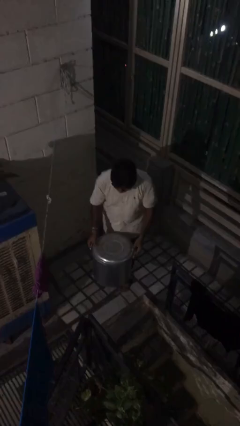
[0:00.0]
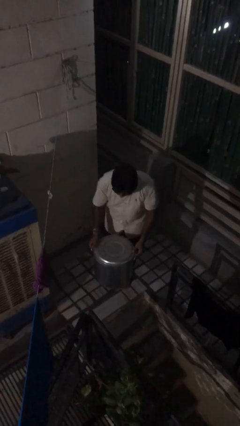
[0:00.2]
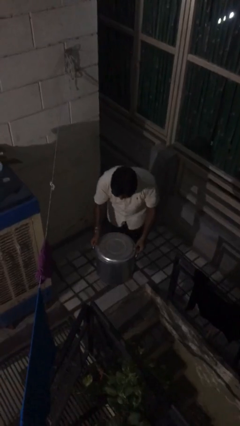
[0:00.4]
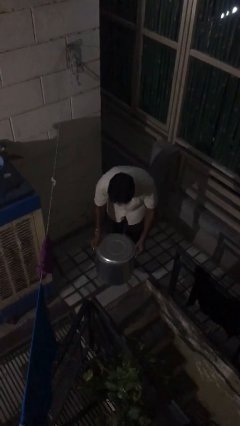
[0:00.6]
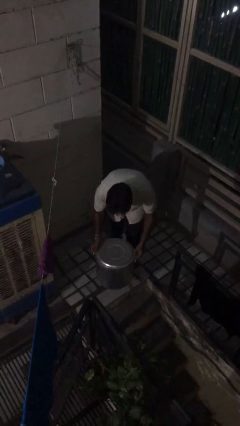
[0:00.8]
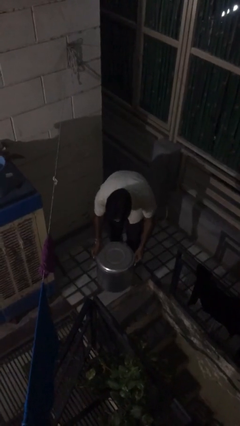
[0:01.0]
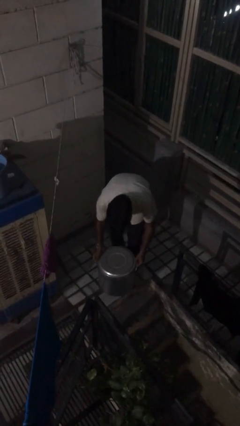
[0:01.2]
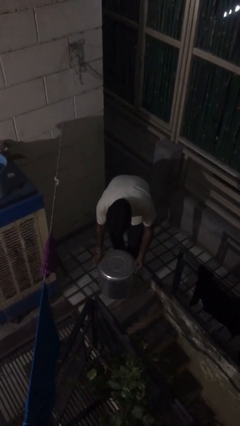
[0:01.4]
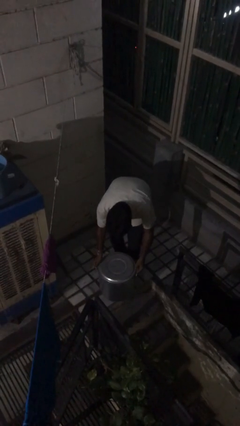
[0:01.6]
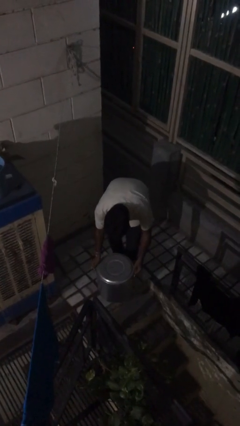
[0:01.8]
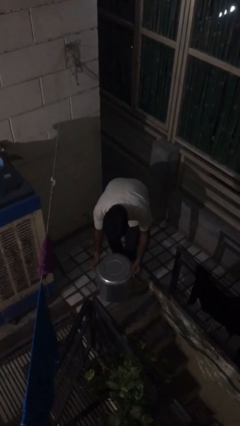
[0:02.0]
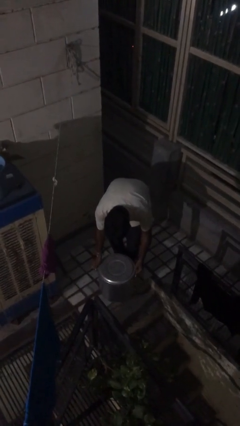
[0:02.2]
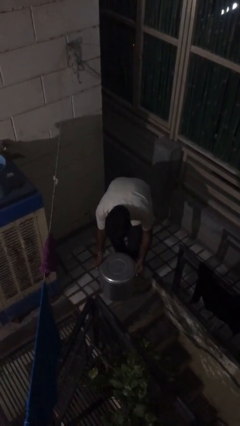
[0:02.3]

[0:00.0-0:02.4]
person puts down object on floor

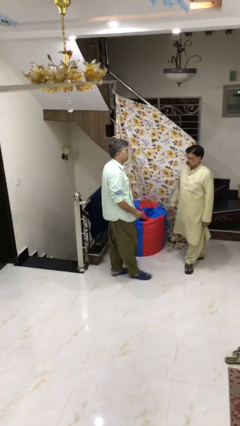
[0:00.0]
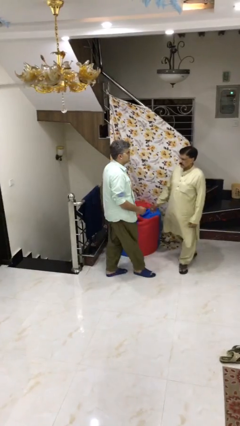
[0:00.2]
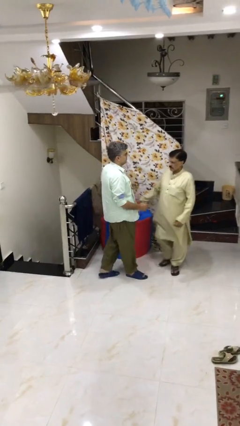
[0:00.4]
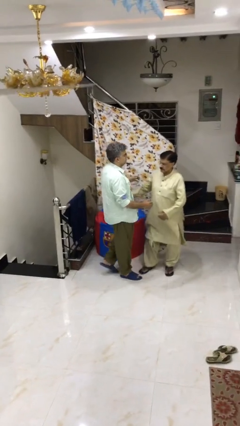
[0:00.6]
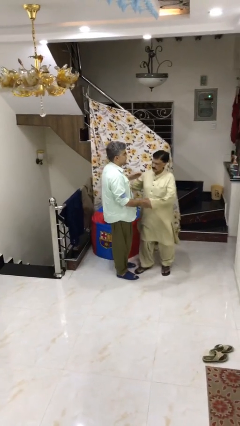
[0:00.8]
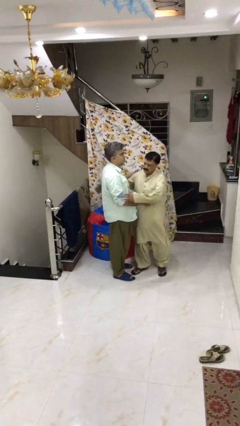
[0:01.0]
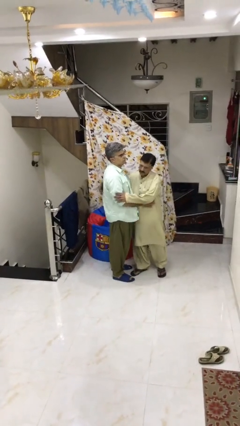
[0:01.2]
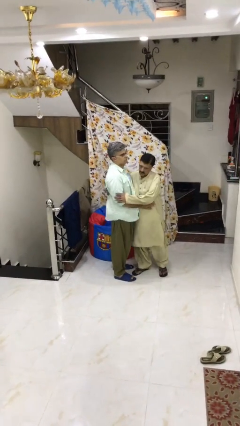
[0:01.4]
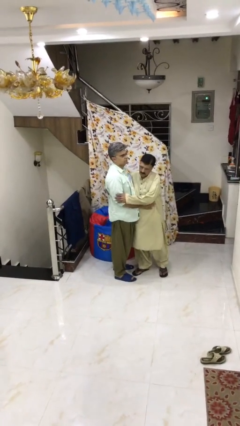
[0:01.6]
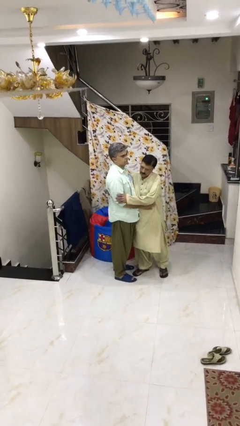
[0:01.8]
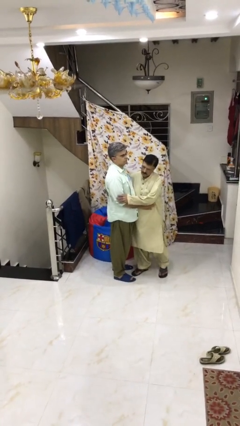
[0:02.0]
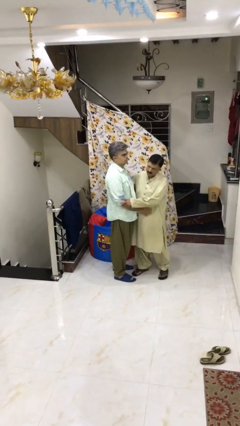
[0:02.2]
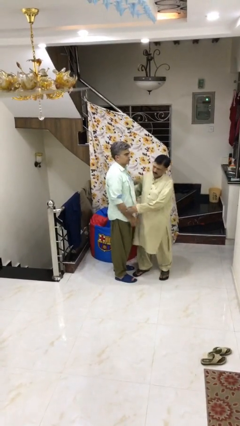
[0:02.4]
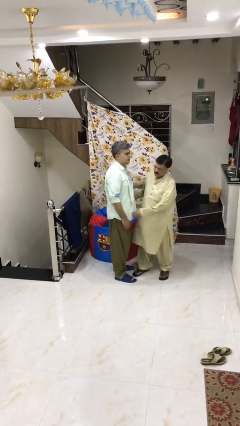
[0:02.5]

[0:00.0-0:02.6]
person embraces person

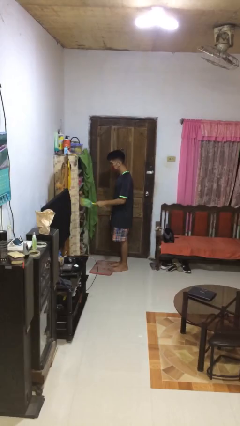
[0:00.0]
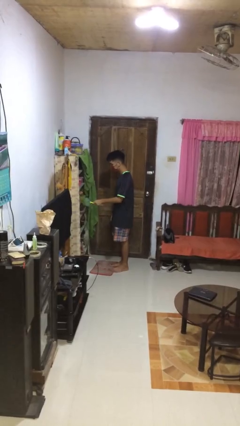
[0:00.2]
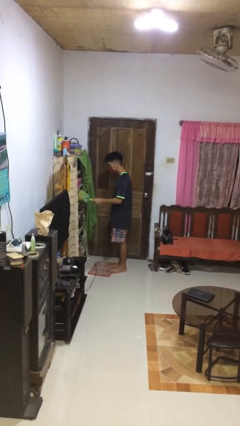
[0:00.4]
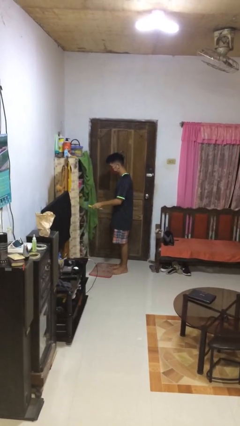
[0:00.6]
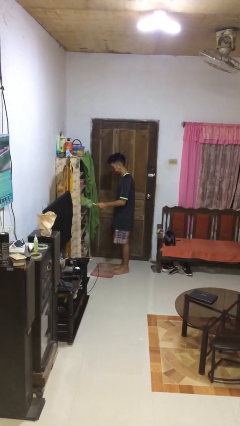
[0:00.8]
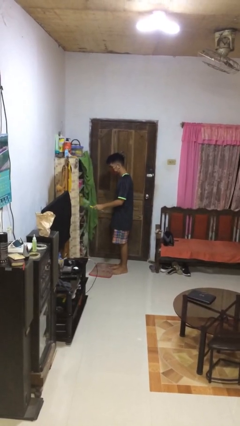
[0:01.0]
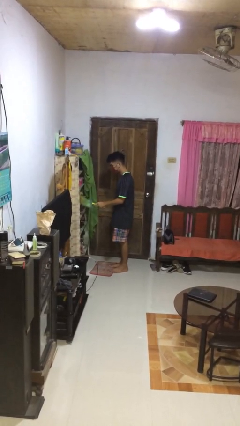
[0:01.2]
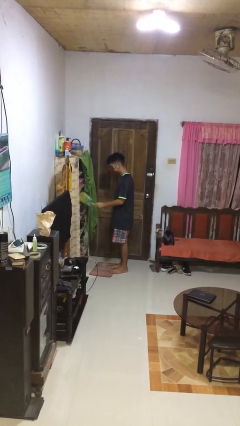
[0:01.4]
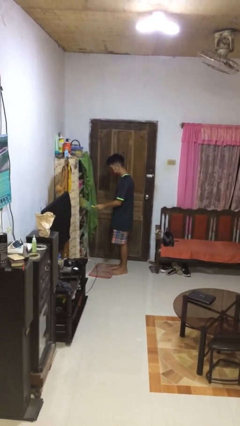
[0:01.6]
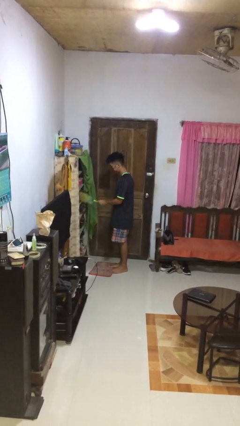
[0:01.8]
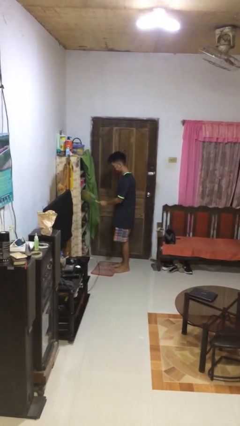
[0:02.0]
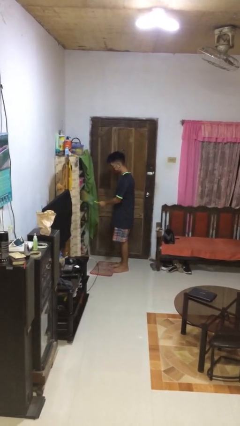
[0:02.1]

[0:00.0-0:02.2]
person dusts furniture

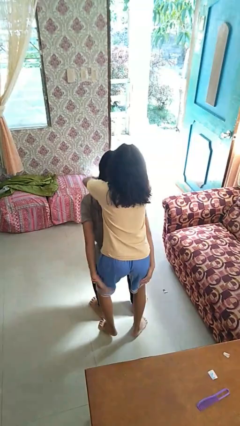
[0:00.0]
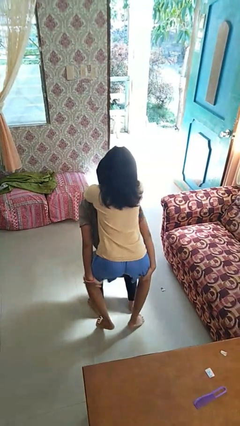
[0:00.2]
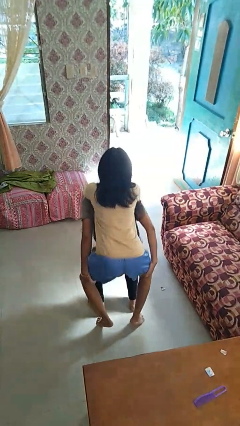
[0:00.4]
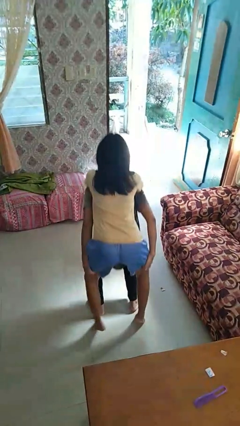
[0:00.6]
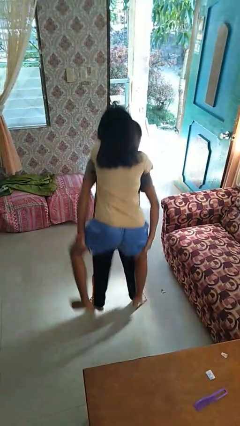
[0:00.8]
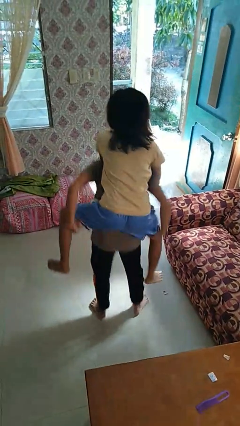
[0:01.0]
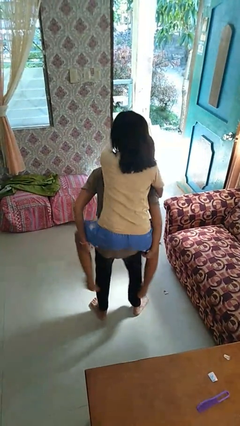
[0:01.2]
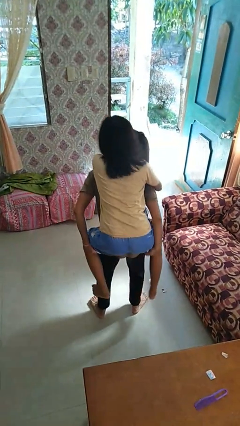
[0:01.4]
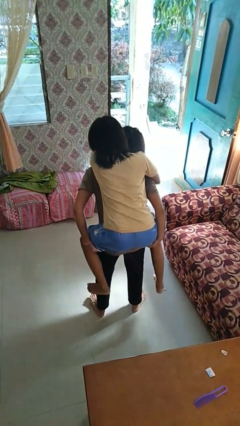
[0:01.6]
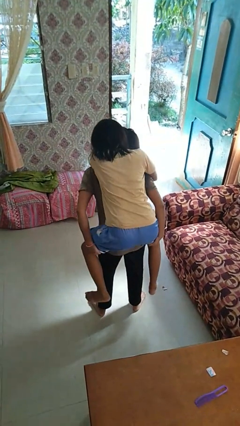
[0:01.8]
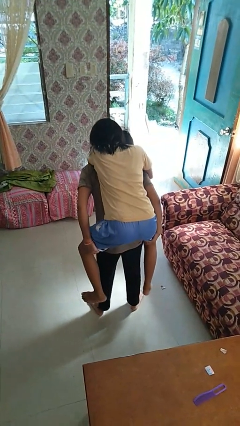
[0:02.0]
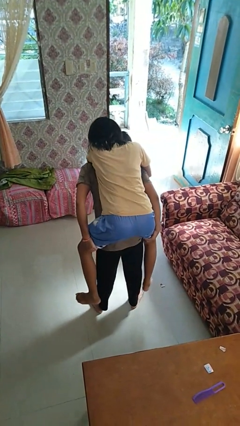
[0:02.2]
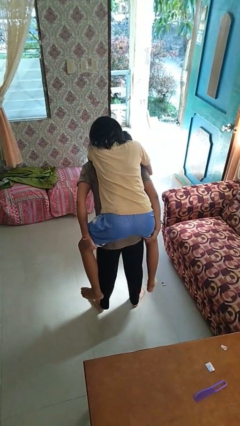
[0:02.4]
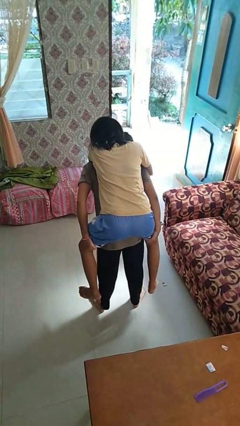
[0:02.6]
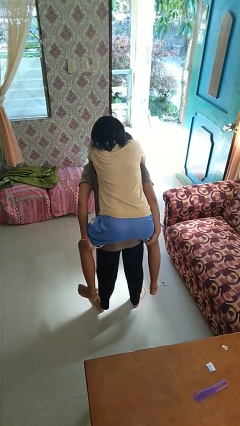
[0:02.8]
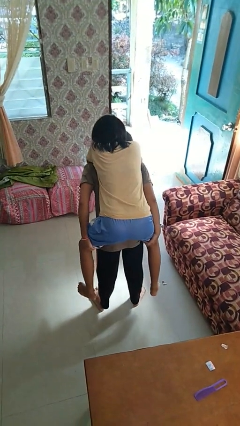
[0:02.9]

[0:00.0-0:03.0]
person carries person on back

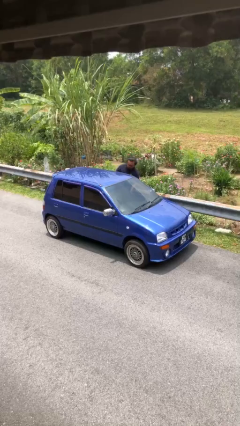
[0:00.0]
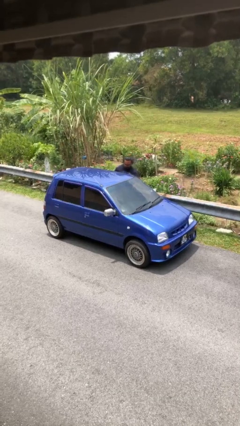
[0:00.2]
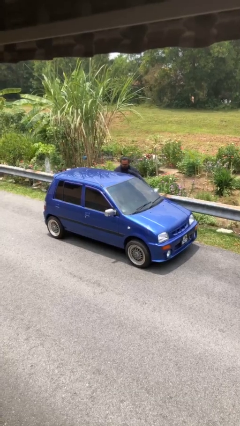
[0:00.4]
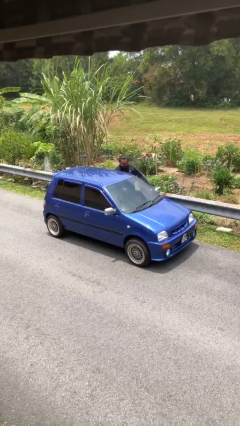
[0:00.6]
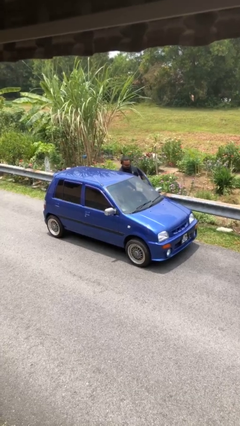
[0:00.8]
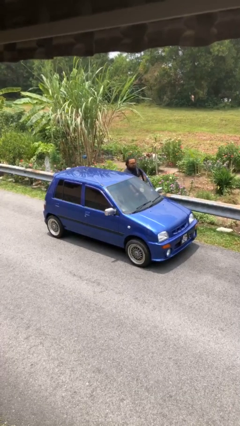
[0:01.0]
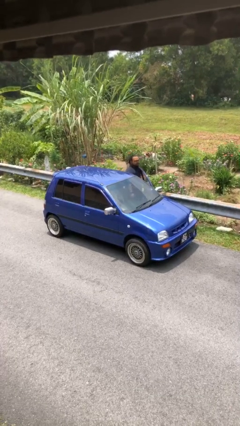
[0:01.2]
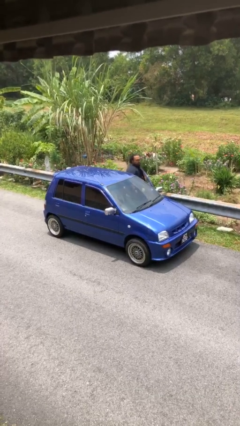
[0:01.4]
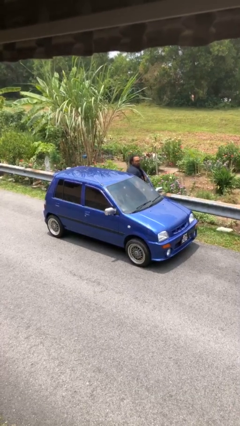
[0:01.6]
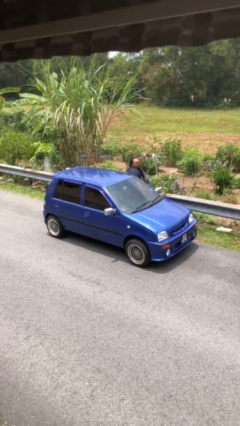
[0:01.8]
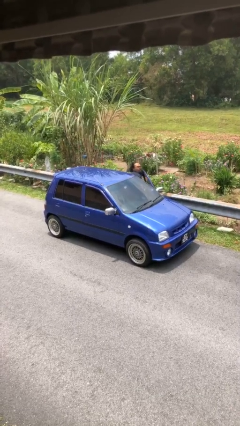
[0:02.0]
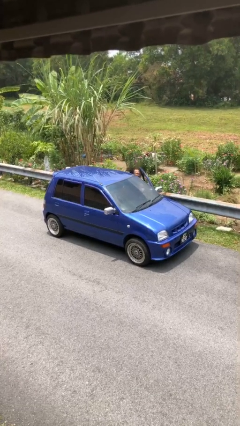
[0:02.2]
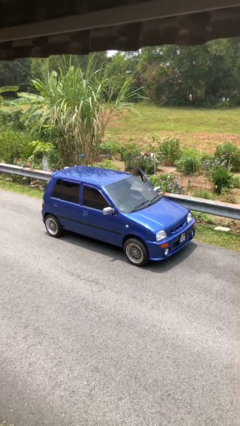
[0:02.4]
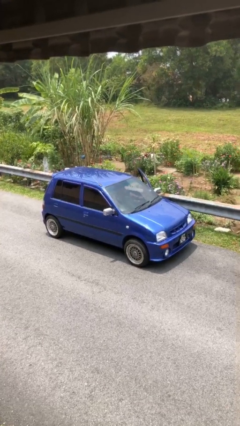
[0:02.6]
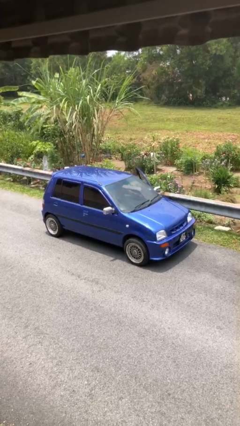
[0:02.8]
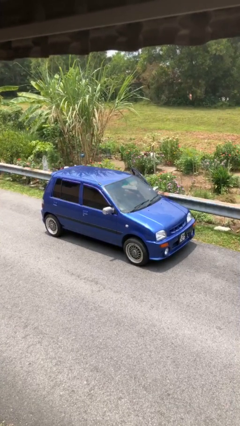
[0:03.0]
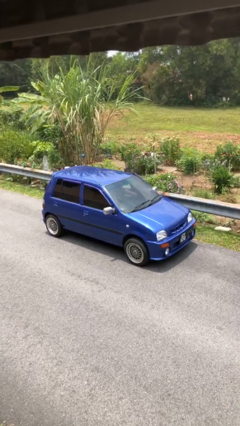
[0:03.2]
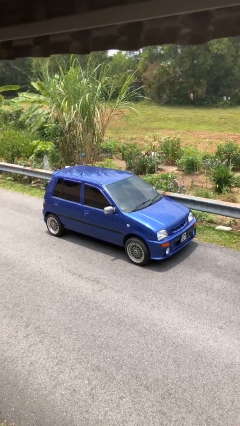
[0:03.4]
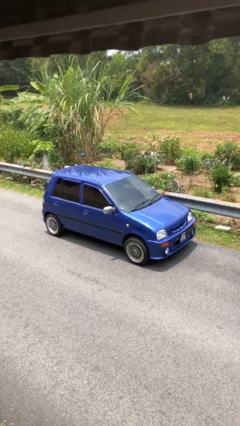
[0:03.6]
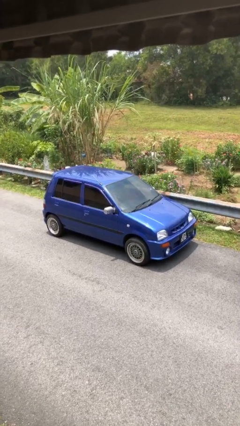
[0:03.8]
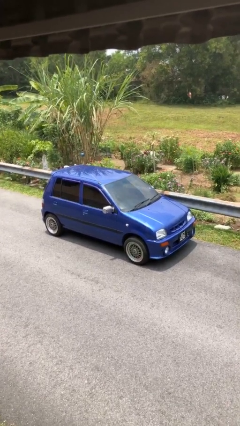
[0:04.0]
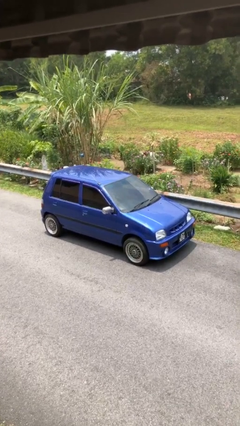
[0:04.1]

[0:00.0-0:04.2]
car picks up person

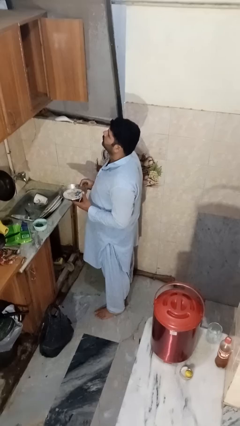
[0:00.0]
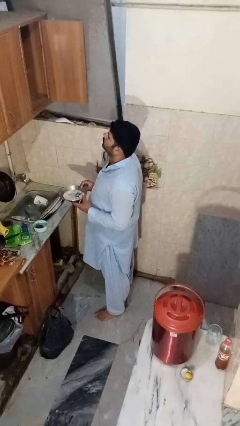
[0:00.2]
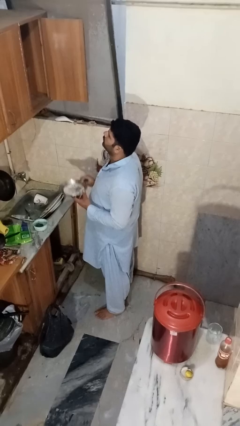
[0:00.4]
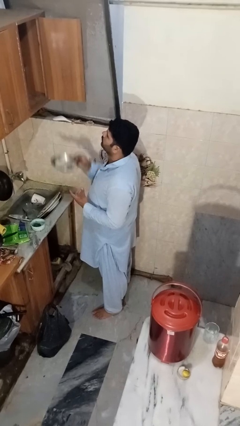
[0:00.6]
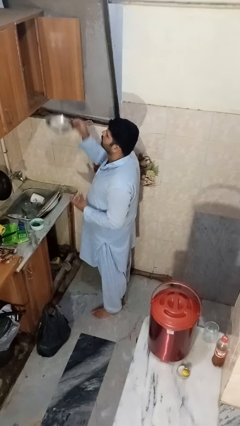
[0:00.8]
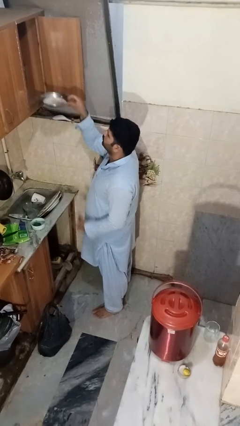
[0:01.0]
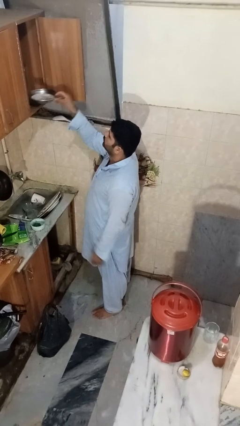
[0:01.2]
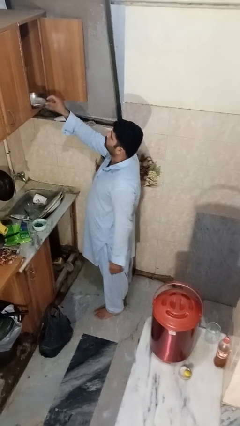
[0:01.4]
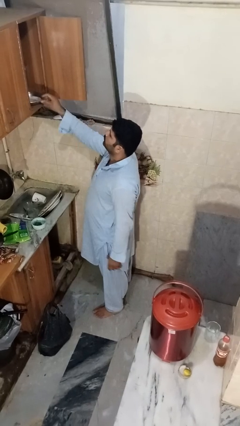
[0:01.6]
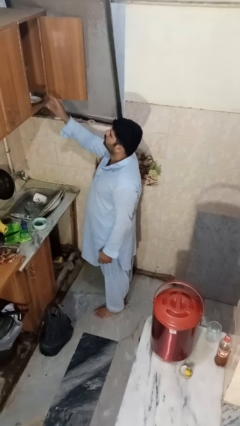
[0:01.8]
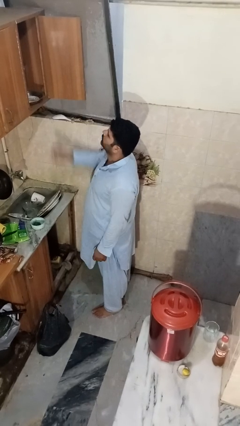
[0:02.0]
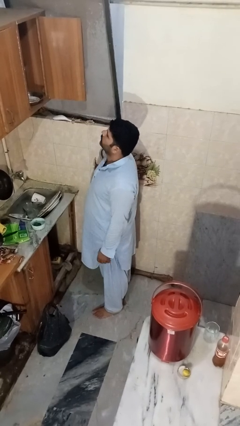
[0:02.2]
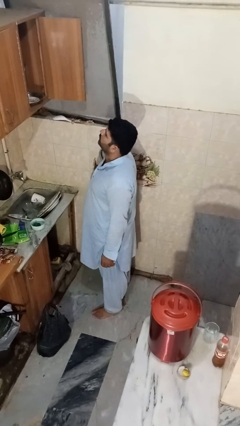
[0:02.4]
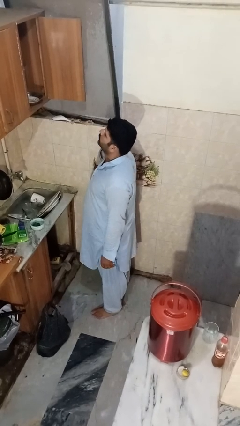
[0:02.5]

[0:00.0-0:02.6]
person puts object in cabinet
